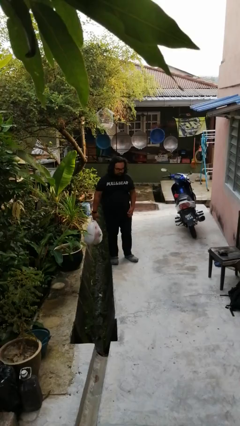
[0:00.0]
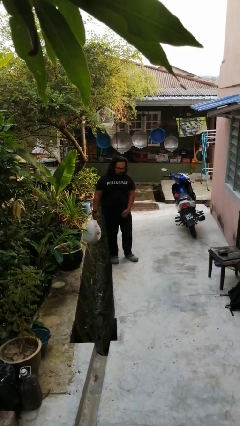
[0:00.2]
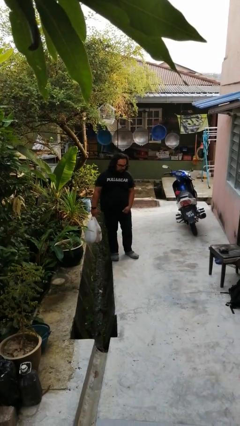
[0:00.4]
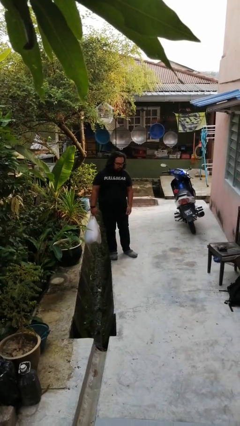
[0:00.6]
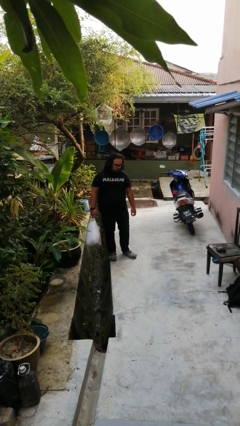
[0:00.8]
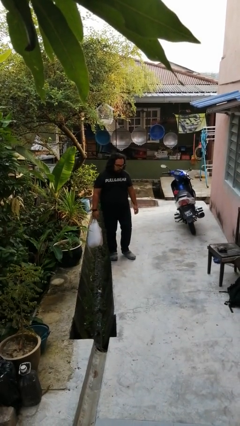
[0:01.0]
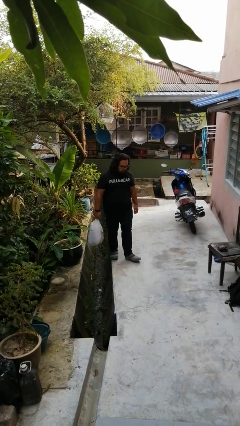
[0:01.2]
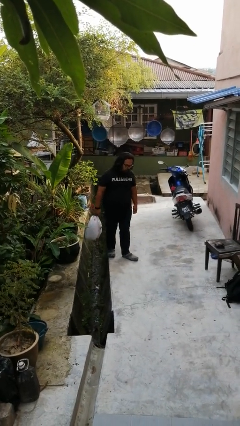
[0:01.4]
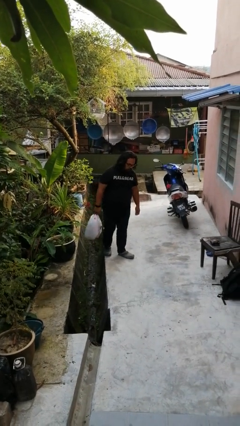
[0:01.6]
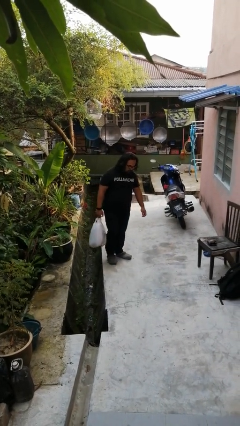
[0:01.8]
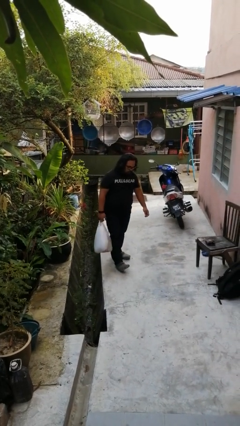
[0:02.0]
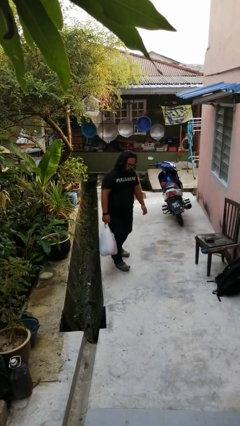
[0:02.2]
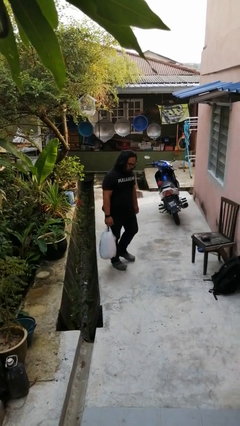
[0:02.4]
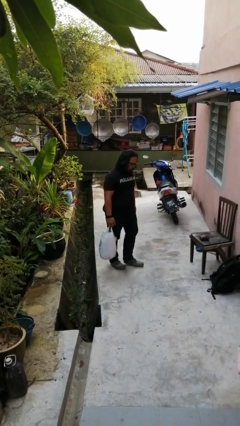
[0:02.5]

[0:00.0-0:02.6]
person carries groceries

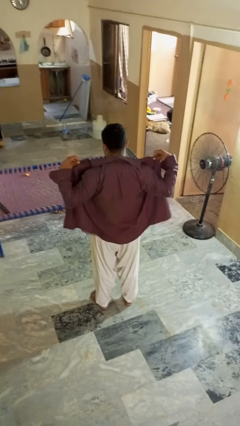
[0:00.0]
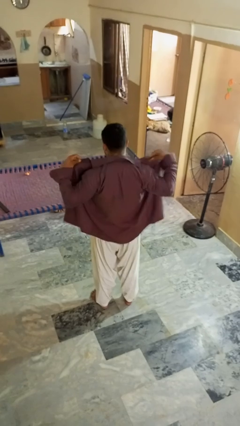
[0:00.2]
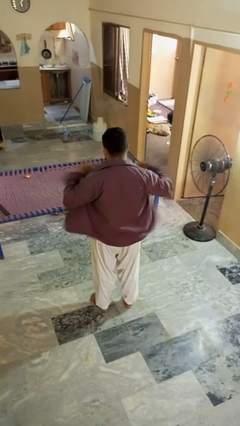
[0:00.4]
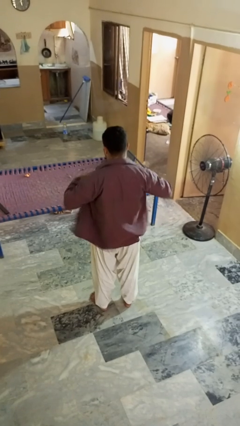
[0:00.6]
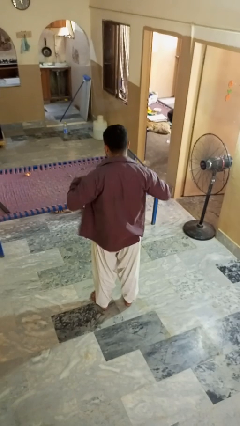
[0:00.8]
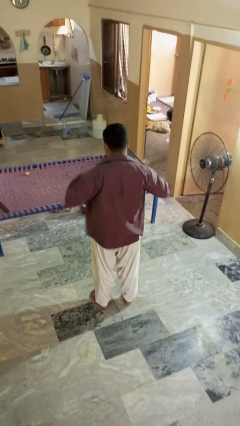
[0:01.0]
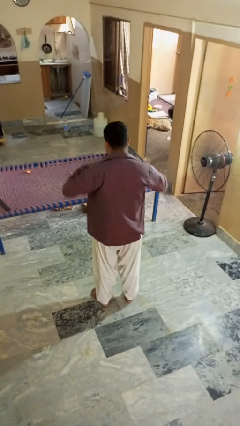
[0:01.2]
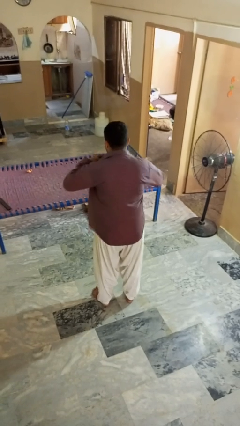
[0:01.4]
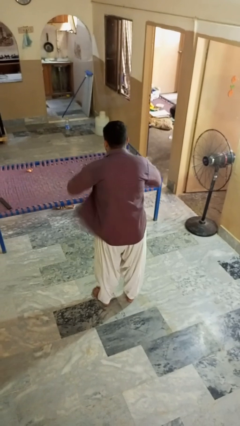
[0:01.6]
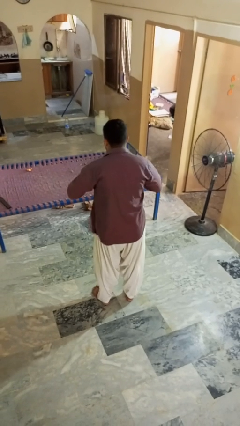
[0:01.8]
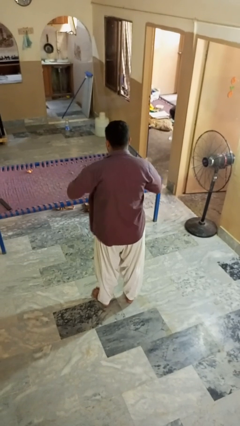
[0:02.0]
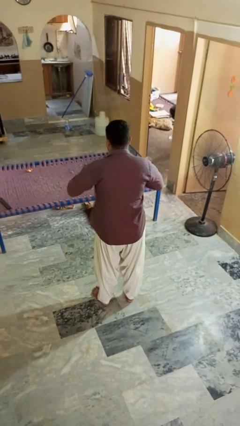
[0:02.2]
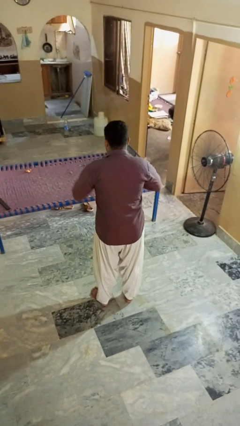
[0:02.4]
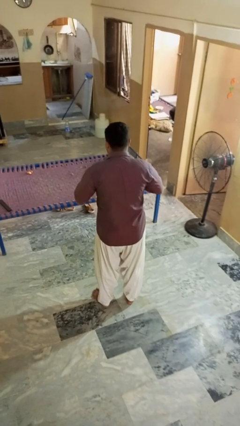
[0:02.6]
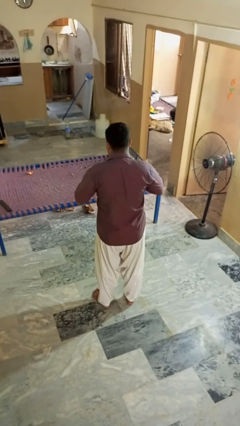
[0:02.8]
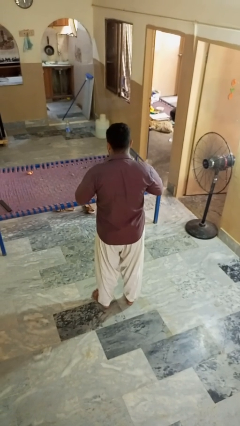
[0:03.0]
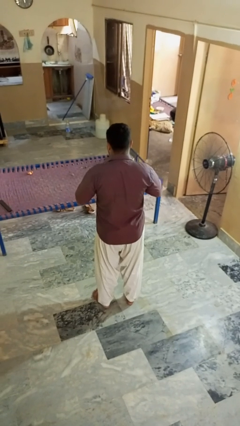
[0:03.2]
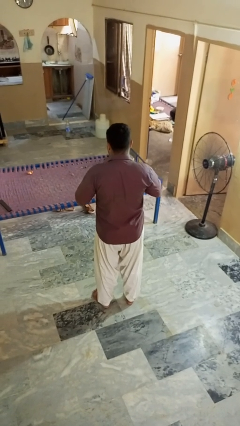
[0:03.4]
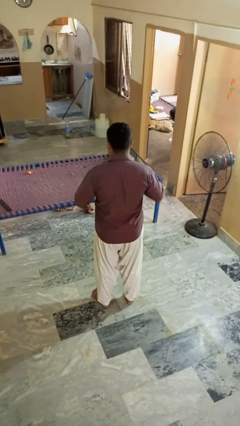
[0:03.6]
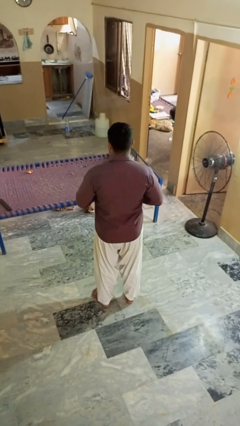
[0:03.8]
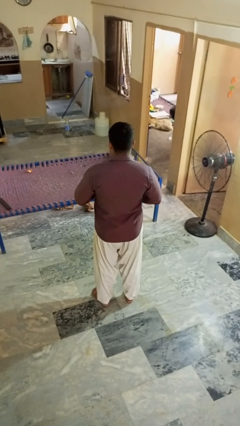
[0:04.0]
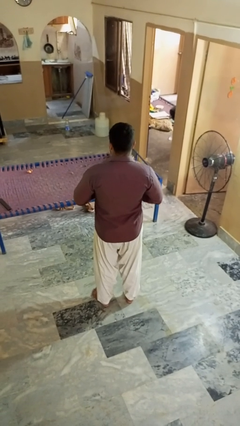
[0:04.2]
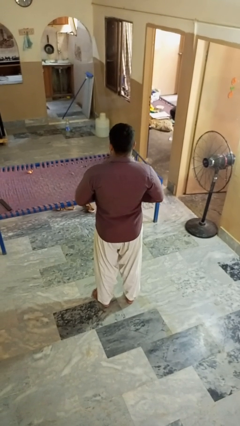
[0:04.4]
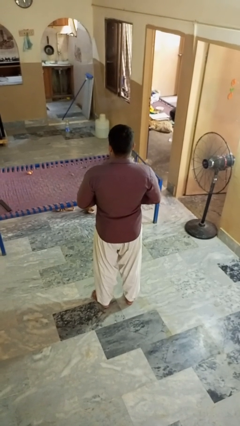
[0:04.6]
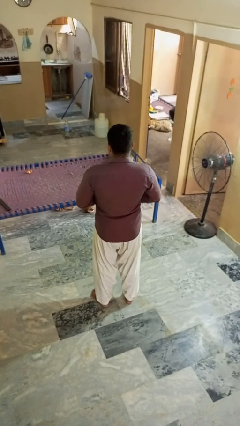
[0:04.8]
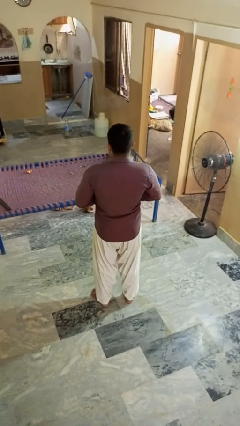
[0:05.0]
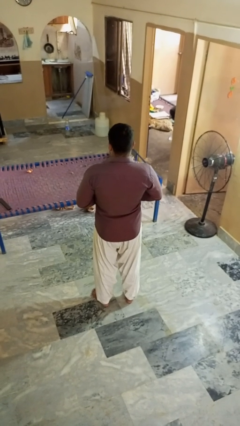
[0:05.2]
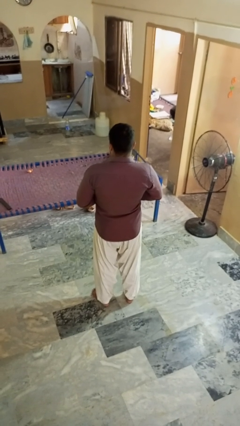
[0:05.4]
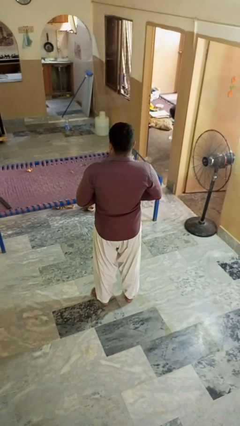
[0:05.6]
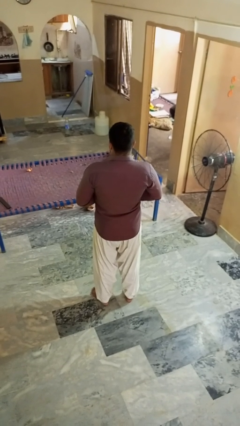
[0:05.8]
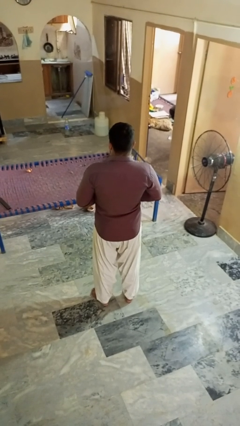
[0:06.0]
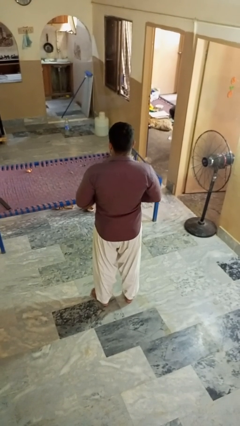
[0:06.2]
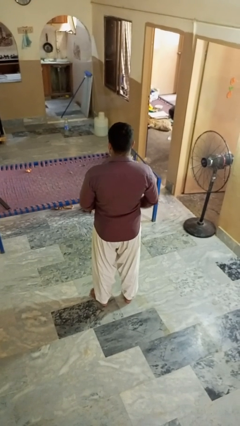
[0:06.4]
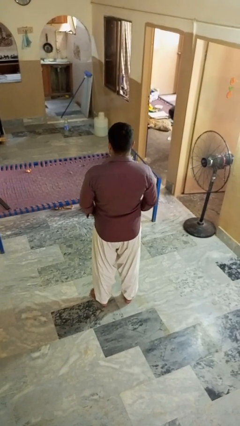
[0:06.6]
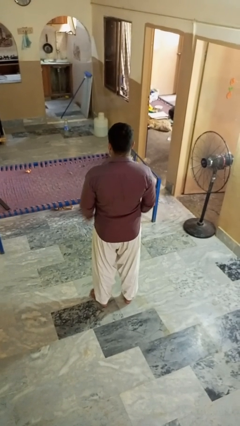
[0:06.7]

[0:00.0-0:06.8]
person buttons shirt

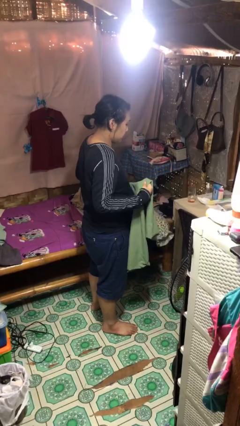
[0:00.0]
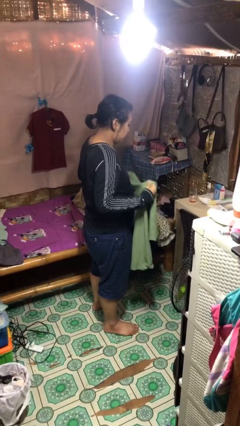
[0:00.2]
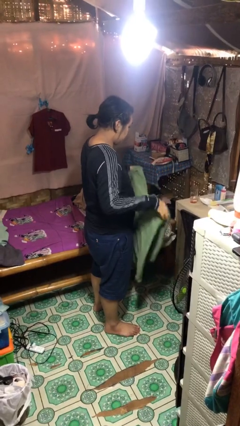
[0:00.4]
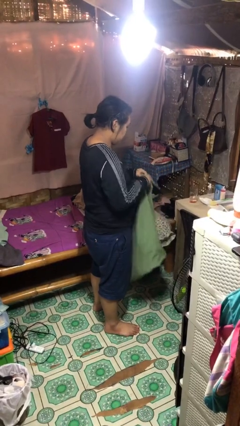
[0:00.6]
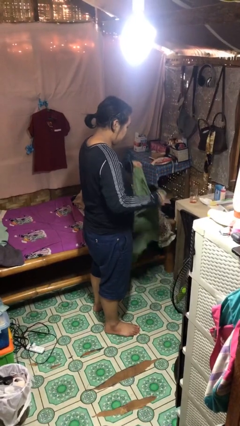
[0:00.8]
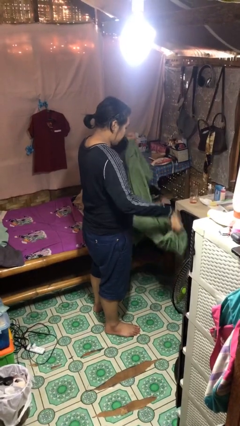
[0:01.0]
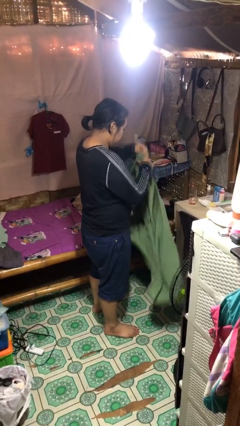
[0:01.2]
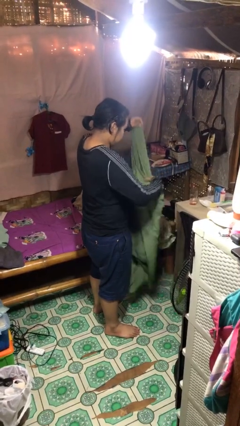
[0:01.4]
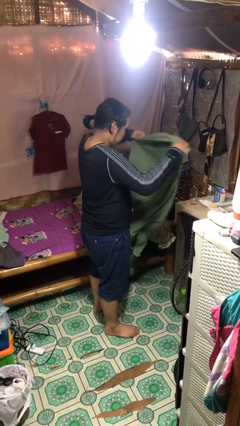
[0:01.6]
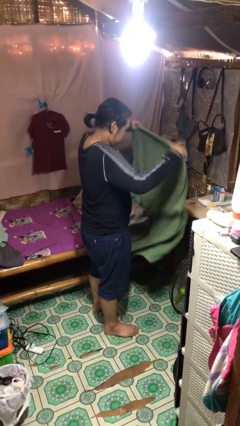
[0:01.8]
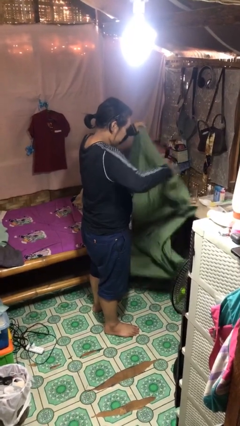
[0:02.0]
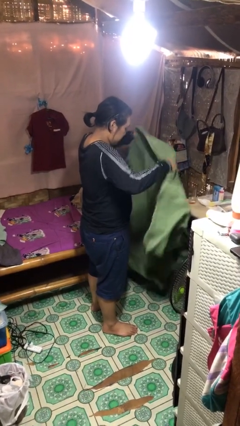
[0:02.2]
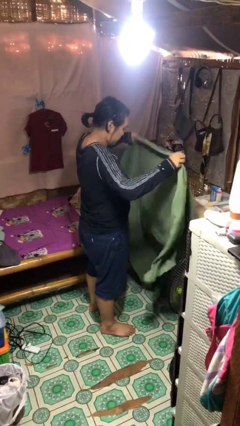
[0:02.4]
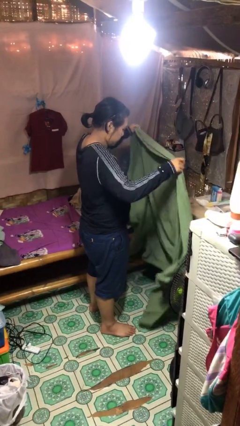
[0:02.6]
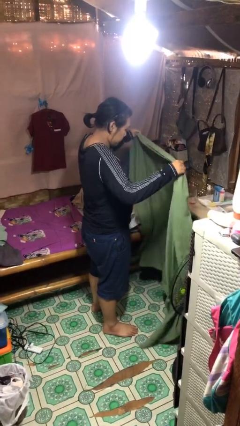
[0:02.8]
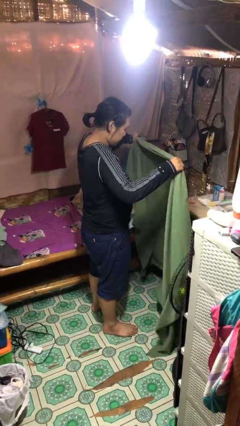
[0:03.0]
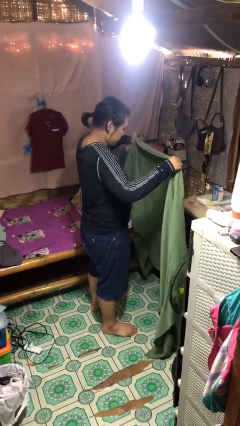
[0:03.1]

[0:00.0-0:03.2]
person unfolds blanket

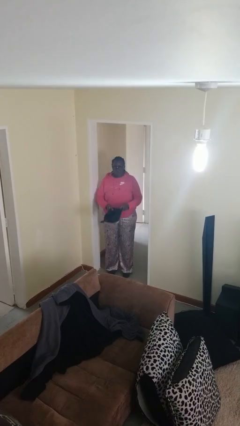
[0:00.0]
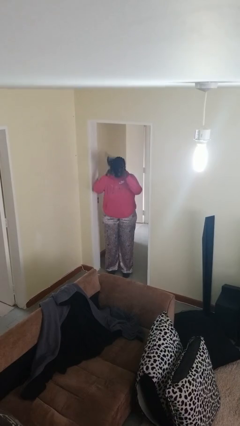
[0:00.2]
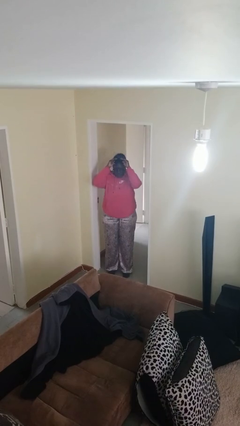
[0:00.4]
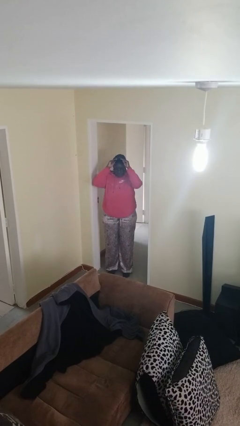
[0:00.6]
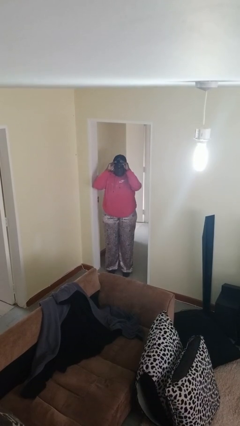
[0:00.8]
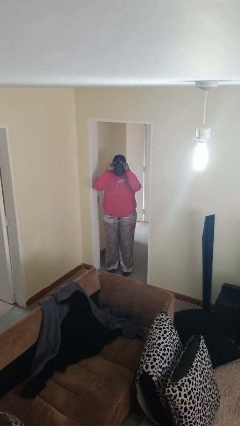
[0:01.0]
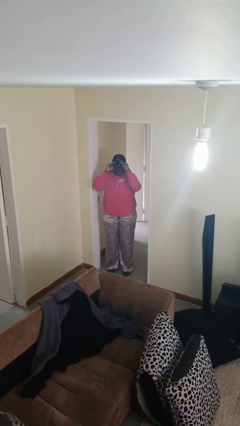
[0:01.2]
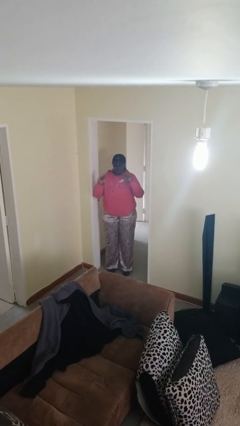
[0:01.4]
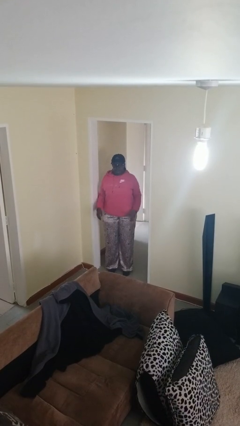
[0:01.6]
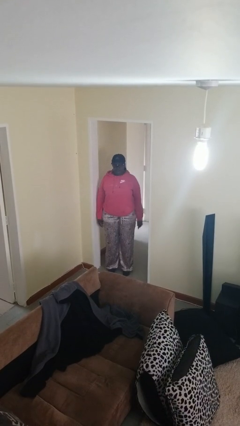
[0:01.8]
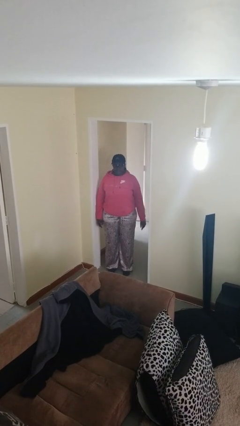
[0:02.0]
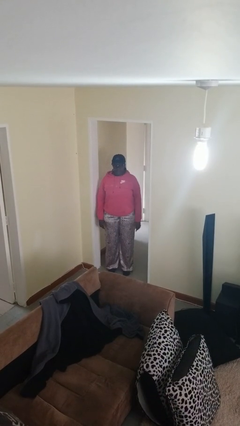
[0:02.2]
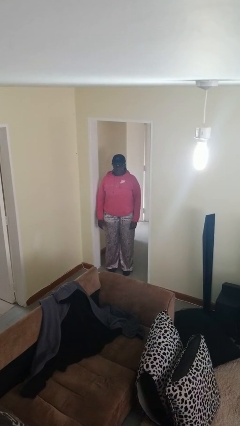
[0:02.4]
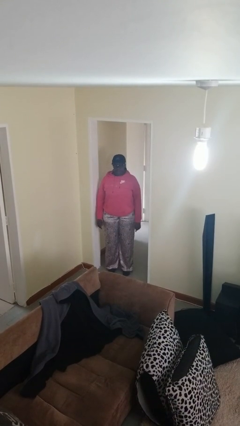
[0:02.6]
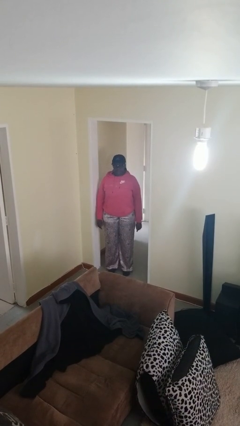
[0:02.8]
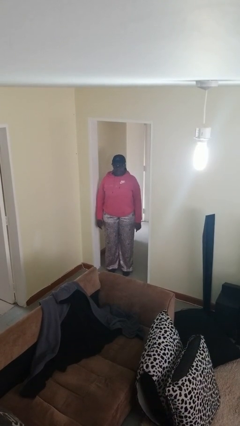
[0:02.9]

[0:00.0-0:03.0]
person puts on hat

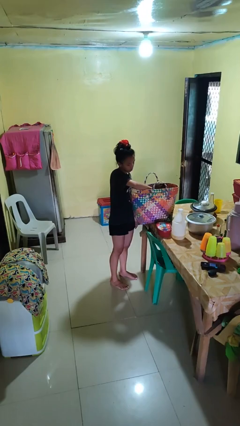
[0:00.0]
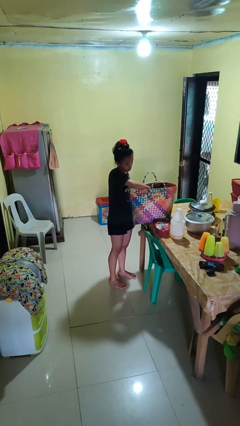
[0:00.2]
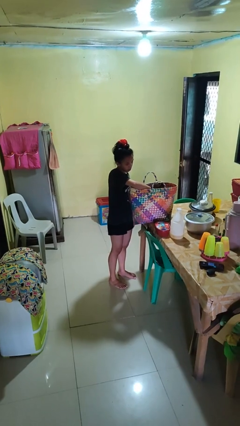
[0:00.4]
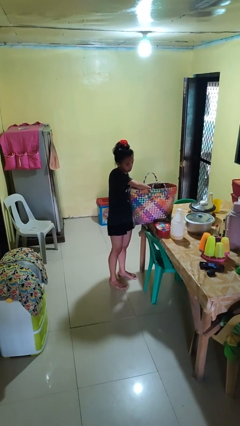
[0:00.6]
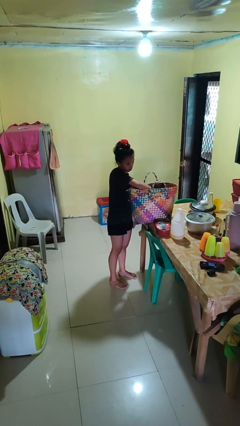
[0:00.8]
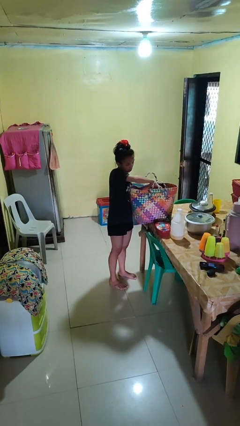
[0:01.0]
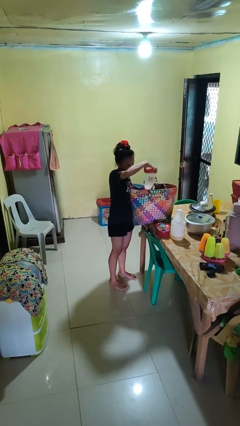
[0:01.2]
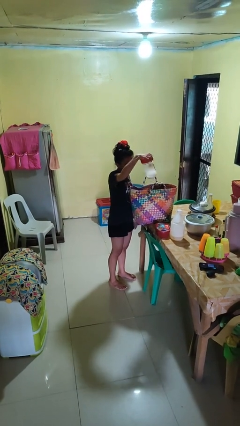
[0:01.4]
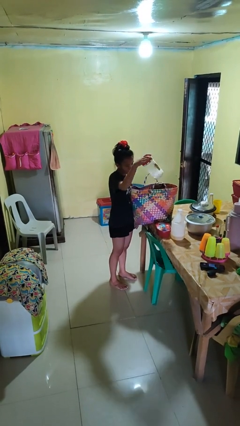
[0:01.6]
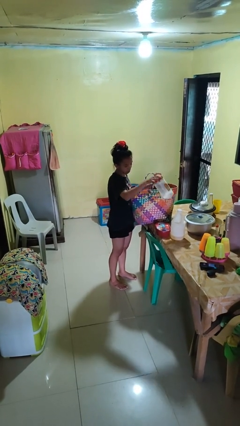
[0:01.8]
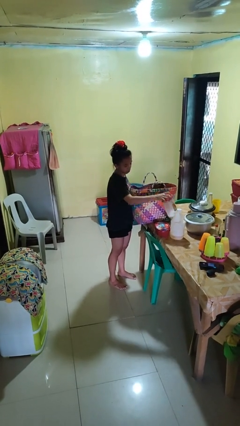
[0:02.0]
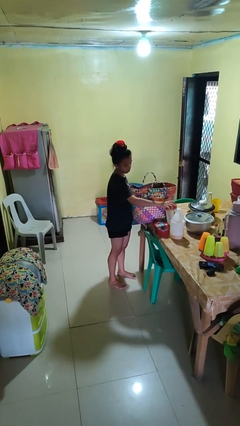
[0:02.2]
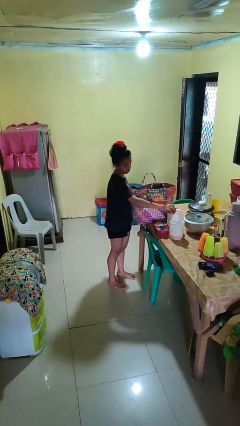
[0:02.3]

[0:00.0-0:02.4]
person takes object from basket
